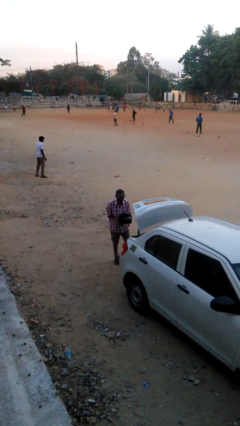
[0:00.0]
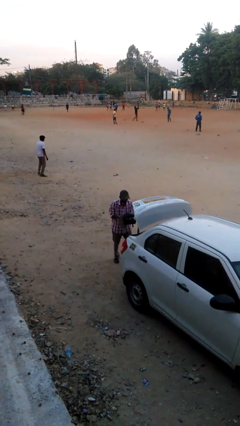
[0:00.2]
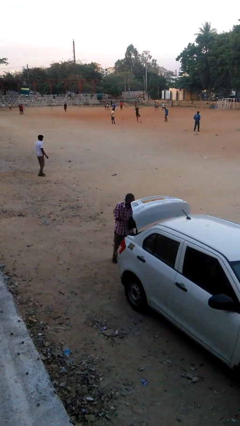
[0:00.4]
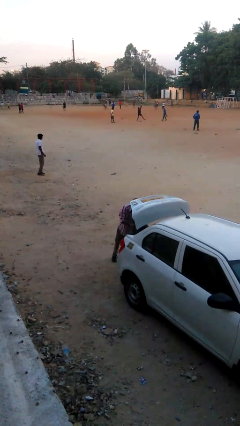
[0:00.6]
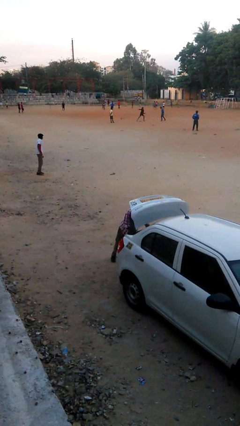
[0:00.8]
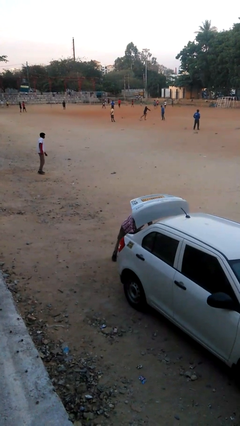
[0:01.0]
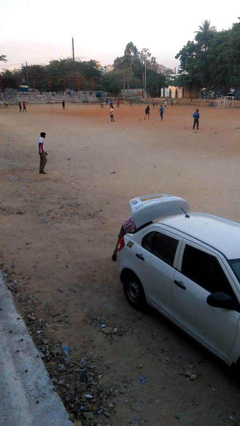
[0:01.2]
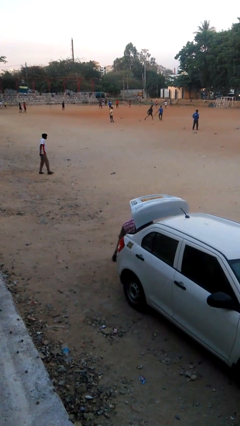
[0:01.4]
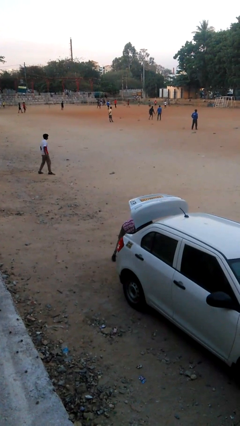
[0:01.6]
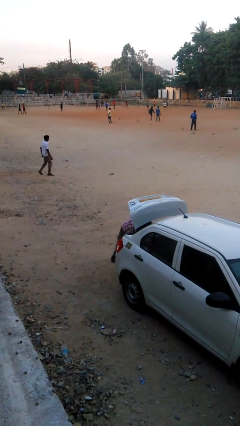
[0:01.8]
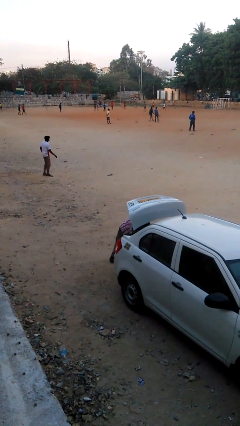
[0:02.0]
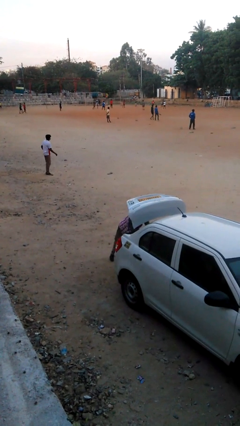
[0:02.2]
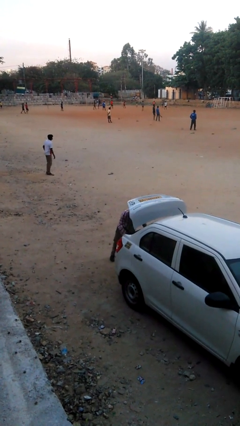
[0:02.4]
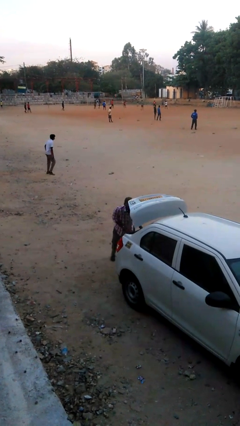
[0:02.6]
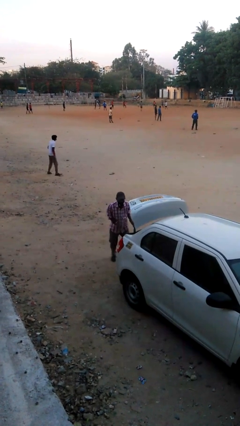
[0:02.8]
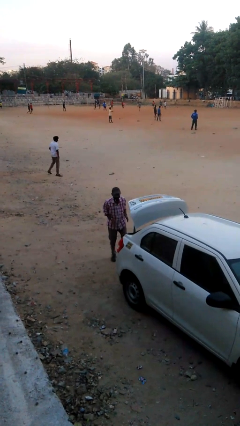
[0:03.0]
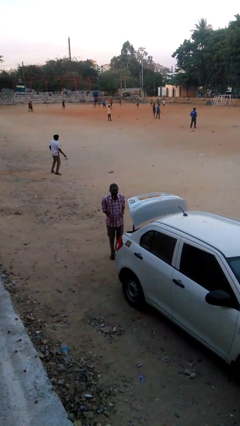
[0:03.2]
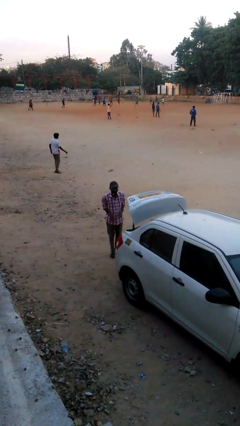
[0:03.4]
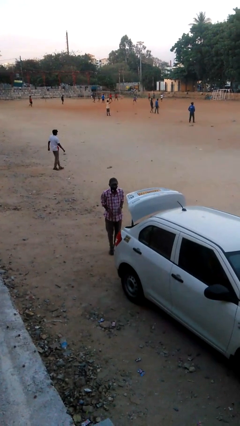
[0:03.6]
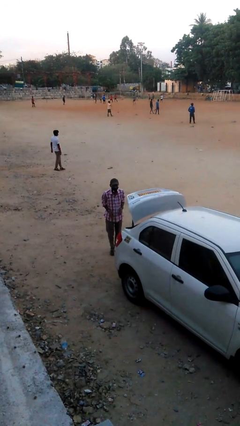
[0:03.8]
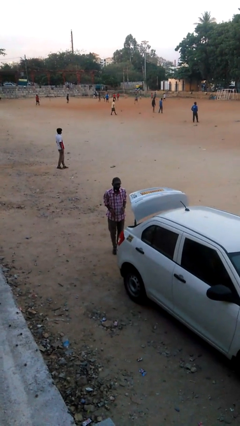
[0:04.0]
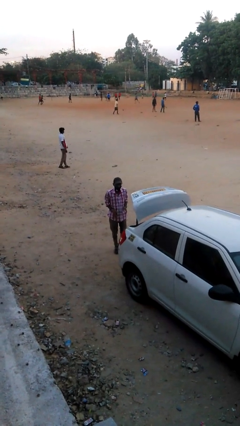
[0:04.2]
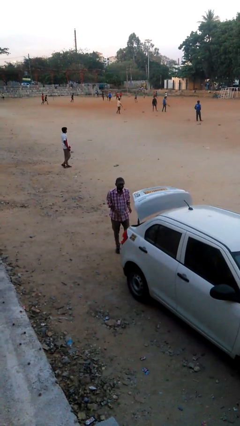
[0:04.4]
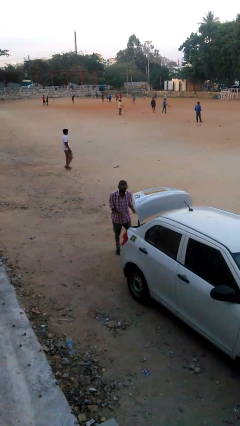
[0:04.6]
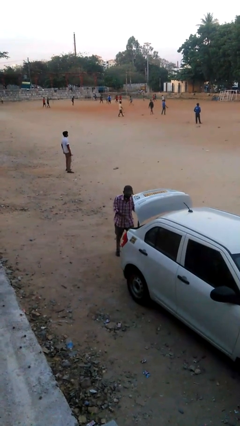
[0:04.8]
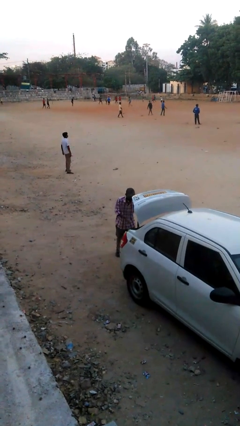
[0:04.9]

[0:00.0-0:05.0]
person loads car

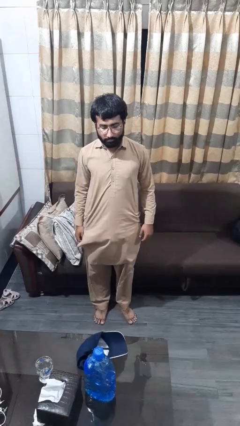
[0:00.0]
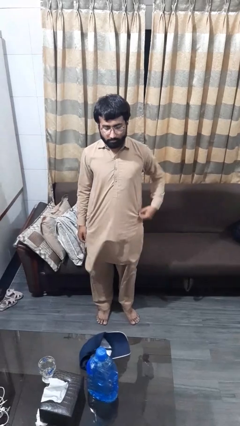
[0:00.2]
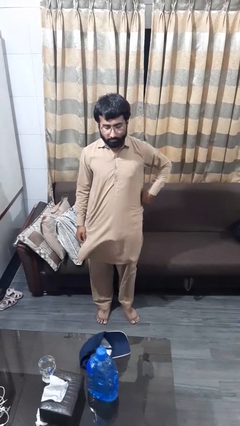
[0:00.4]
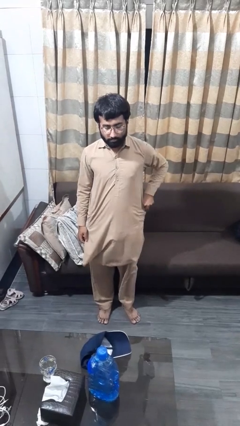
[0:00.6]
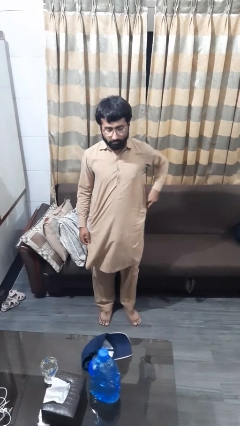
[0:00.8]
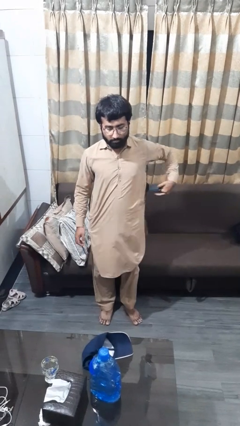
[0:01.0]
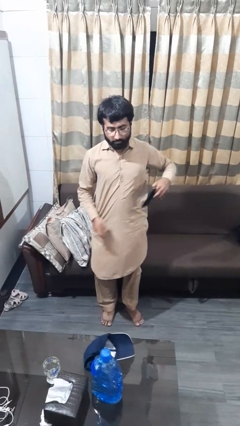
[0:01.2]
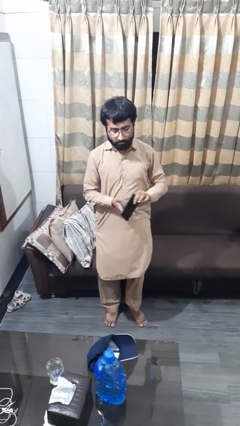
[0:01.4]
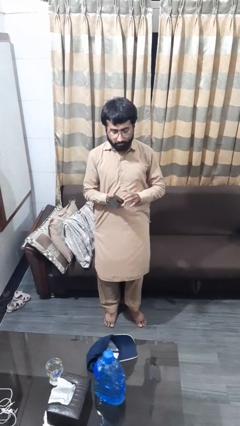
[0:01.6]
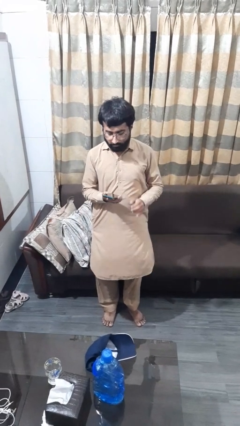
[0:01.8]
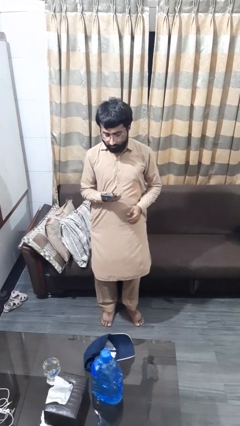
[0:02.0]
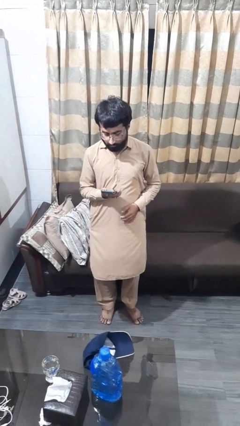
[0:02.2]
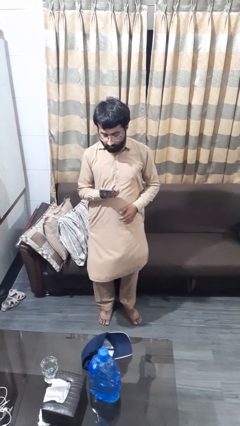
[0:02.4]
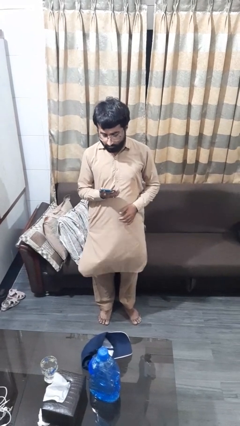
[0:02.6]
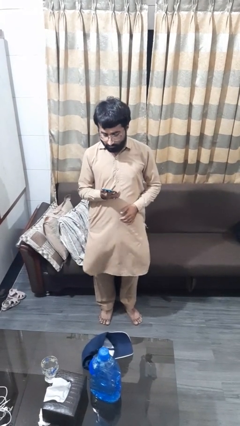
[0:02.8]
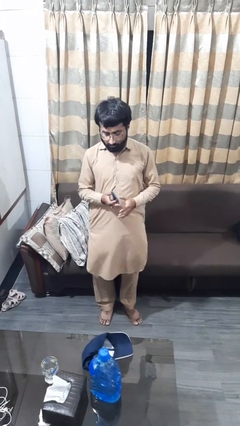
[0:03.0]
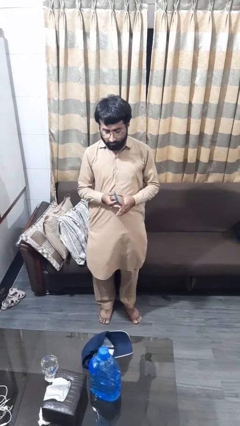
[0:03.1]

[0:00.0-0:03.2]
person takes phone from pocket

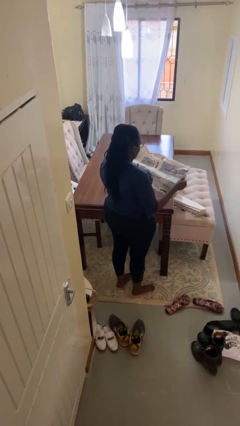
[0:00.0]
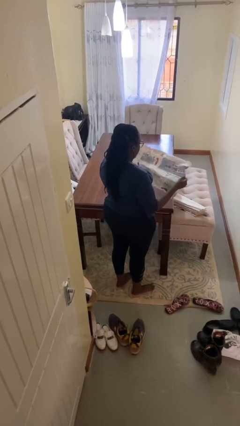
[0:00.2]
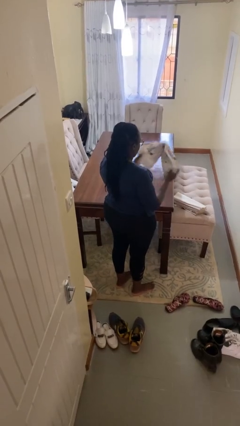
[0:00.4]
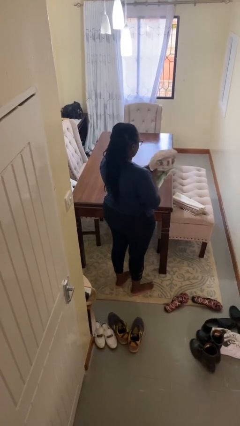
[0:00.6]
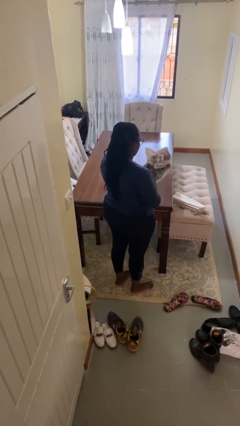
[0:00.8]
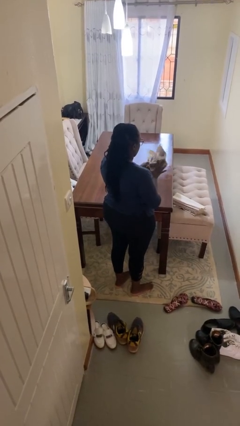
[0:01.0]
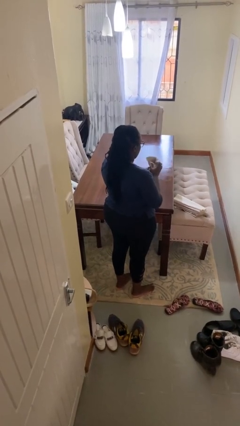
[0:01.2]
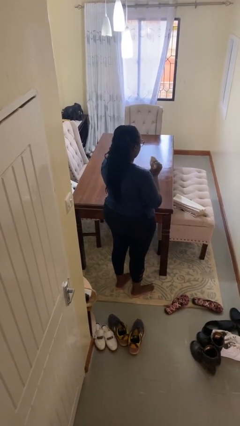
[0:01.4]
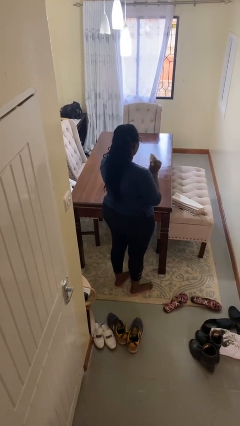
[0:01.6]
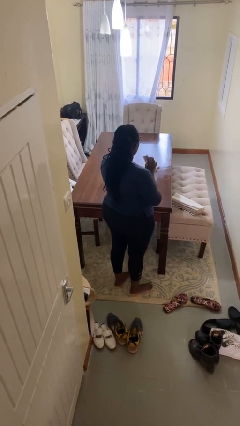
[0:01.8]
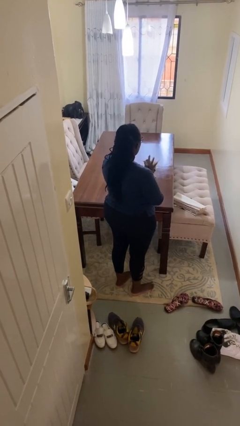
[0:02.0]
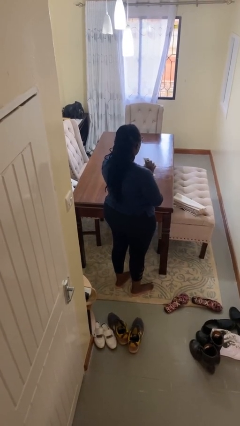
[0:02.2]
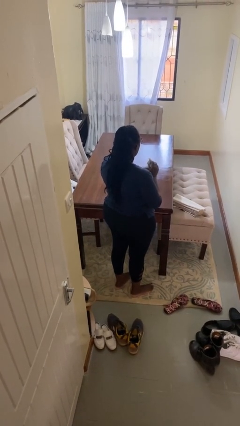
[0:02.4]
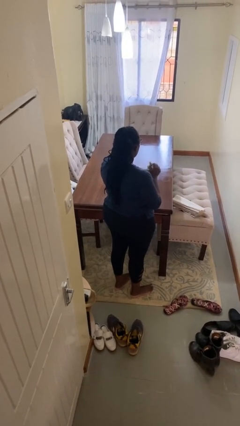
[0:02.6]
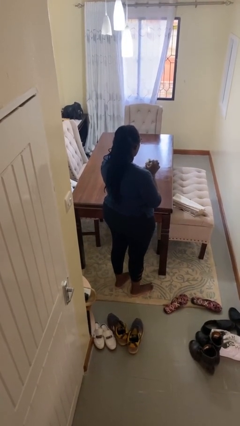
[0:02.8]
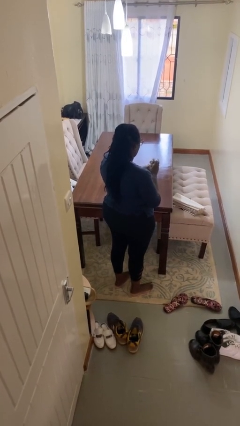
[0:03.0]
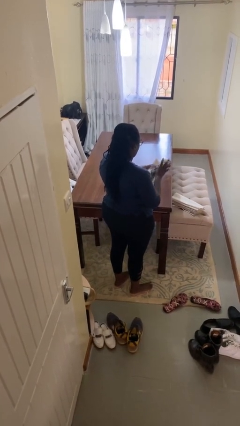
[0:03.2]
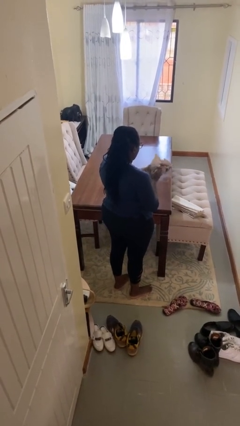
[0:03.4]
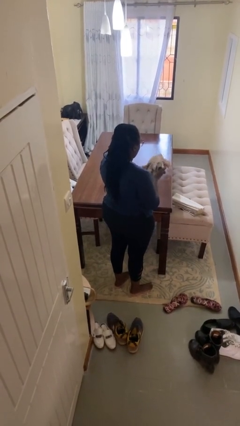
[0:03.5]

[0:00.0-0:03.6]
person crumples paper

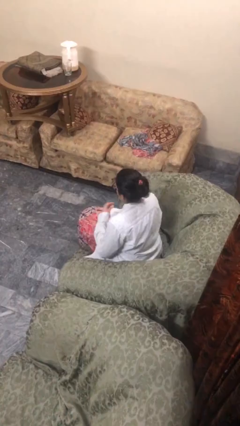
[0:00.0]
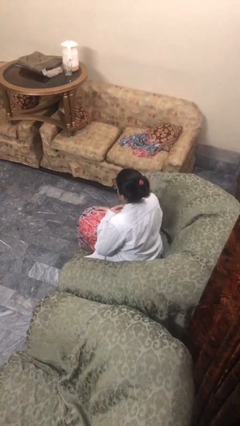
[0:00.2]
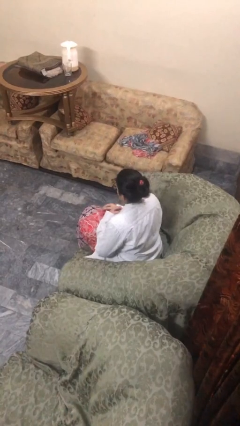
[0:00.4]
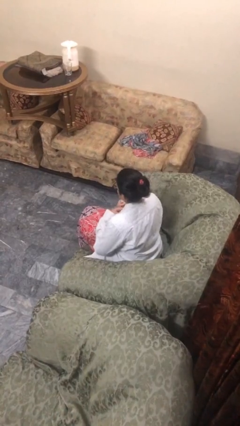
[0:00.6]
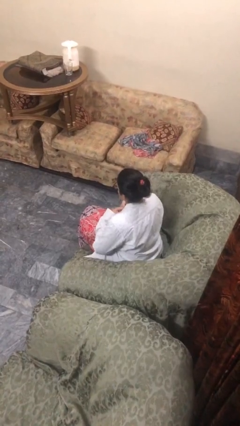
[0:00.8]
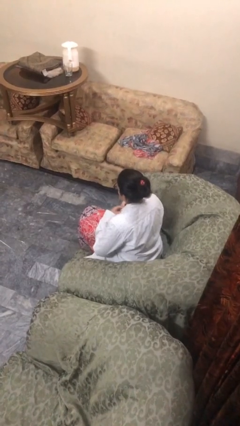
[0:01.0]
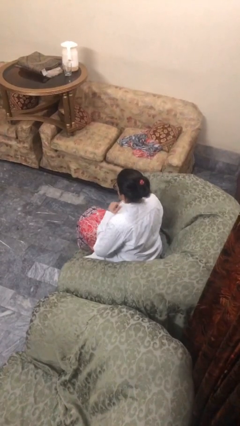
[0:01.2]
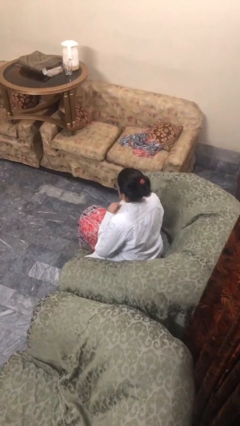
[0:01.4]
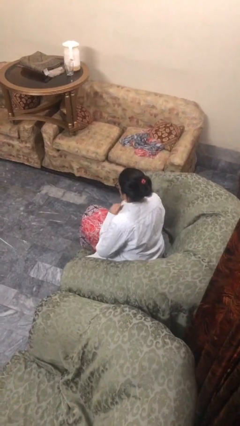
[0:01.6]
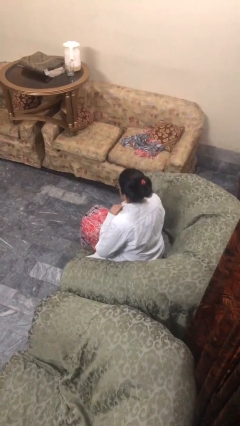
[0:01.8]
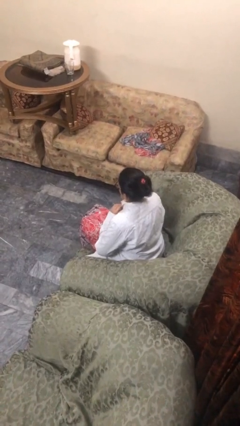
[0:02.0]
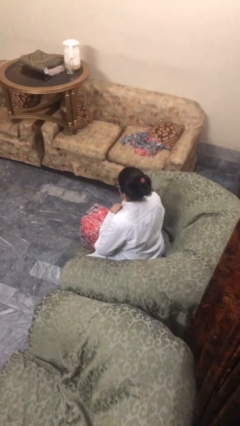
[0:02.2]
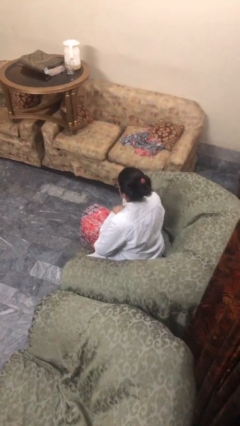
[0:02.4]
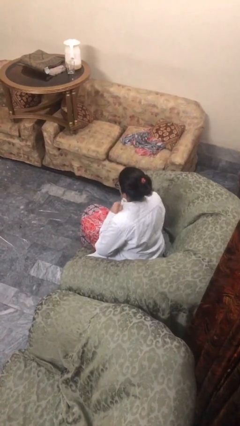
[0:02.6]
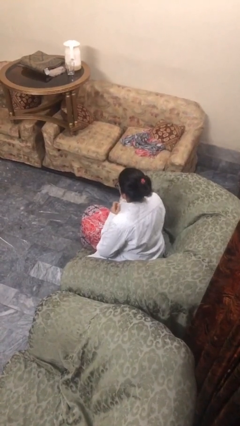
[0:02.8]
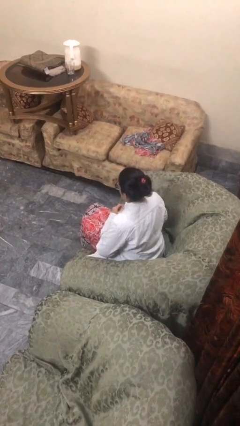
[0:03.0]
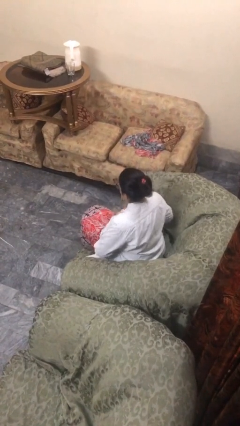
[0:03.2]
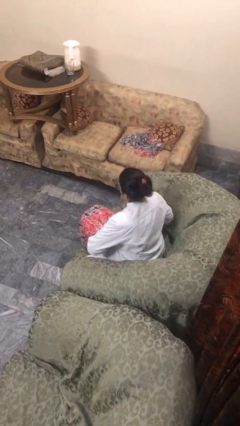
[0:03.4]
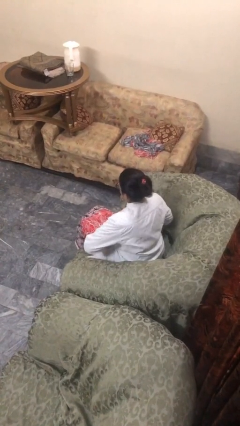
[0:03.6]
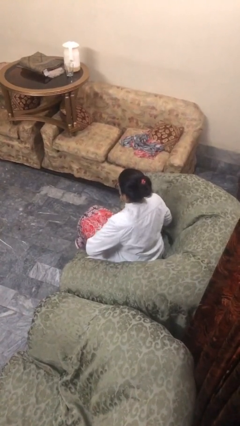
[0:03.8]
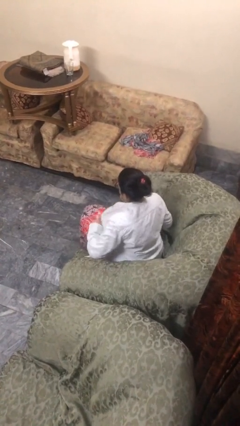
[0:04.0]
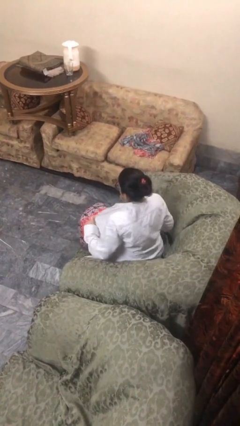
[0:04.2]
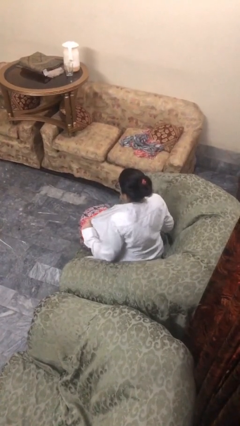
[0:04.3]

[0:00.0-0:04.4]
person unbuttons shirt

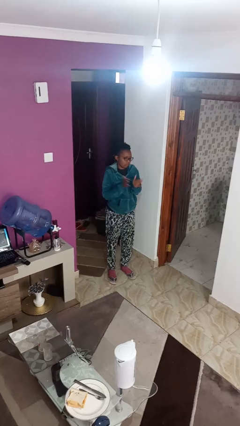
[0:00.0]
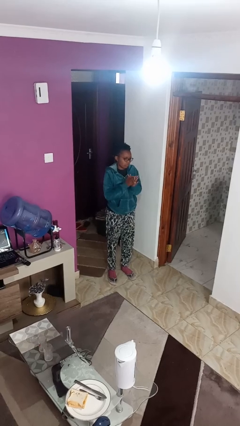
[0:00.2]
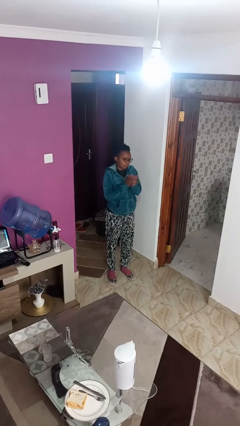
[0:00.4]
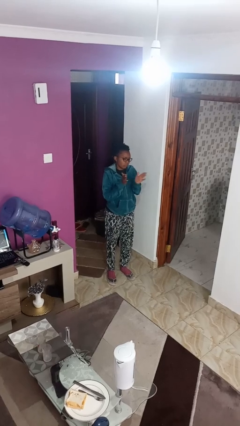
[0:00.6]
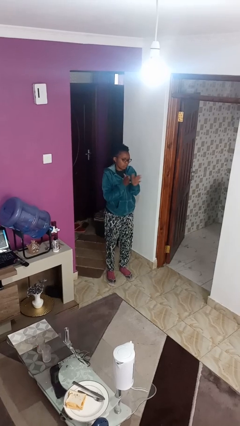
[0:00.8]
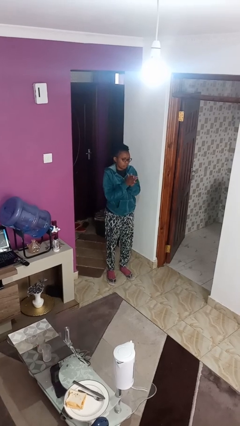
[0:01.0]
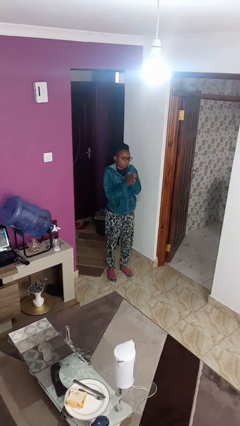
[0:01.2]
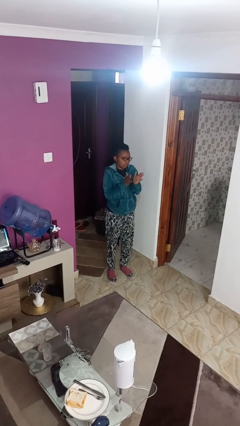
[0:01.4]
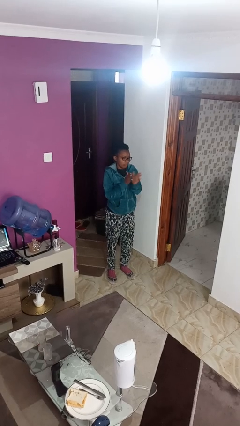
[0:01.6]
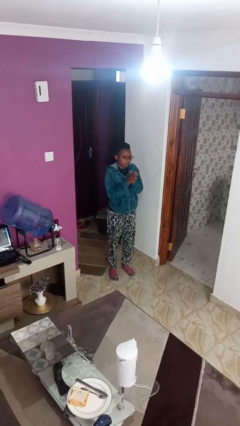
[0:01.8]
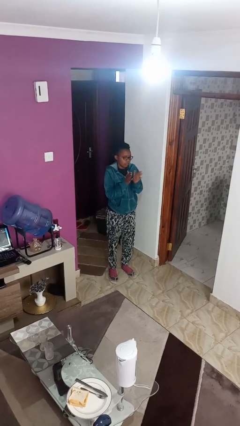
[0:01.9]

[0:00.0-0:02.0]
person claps hands
